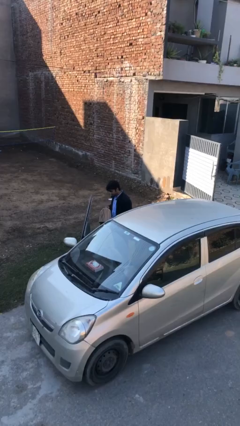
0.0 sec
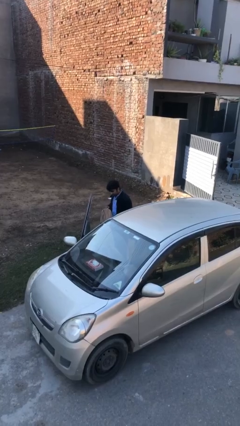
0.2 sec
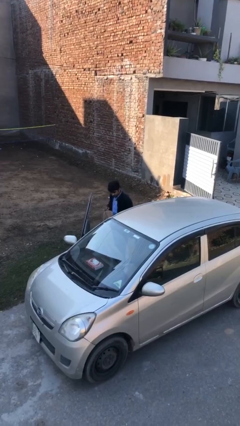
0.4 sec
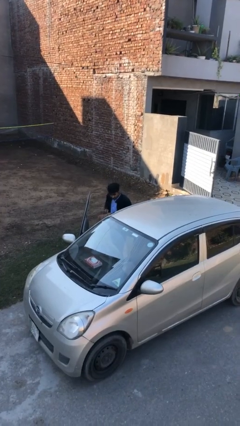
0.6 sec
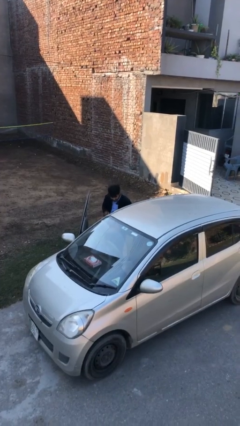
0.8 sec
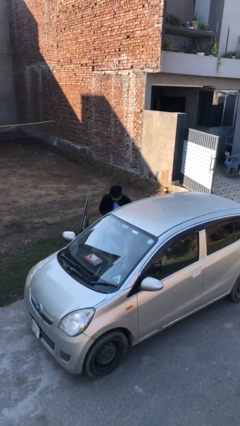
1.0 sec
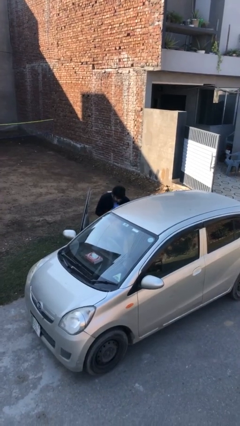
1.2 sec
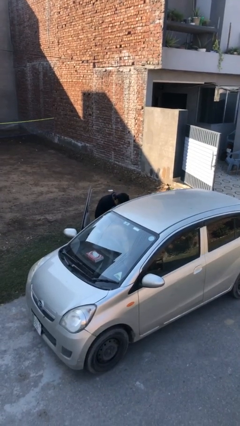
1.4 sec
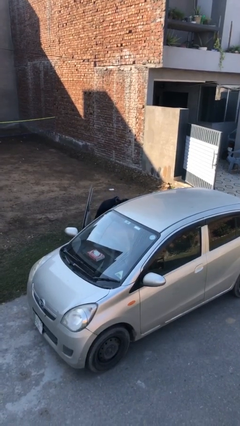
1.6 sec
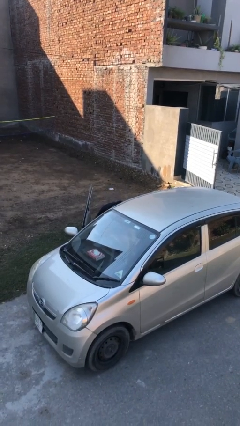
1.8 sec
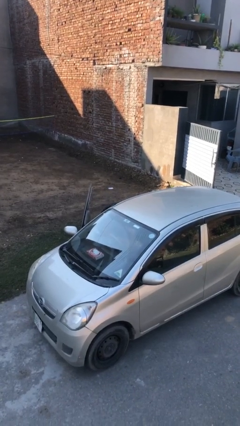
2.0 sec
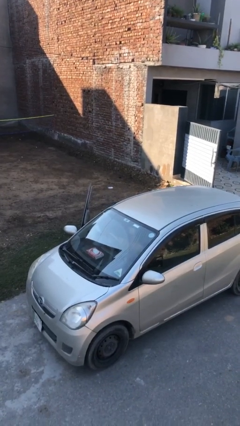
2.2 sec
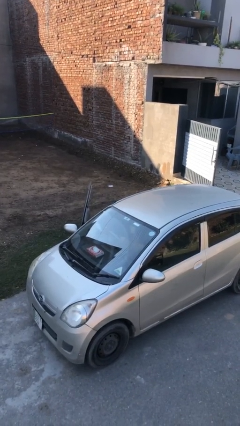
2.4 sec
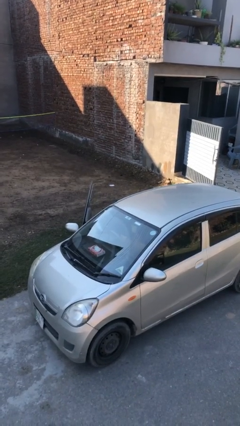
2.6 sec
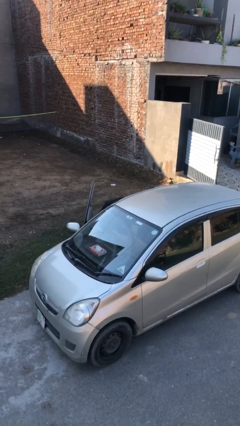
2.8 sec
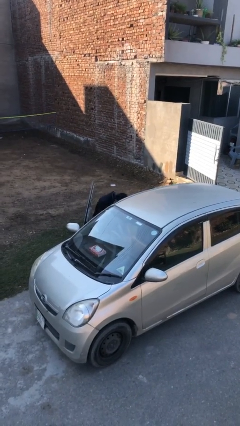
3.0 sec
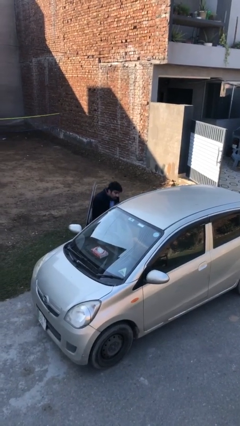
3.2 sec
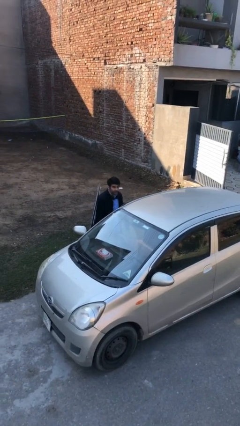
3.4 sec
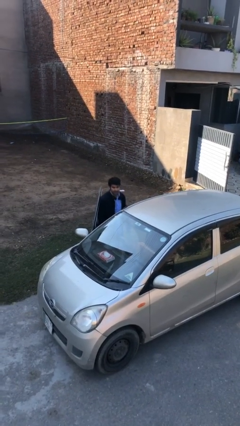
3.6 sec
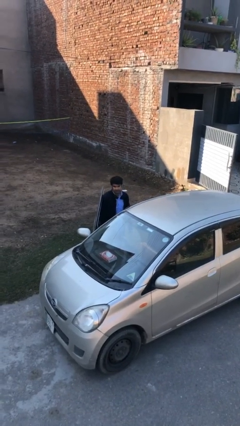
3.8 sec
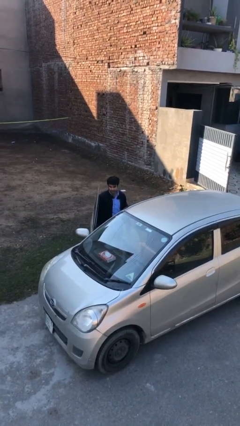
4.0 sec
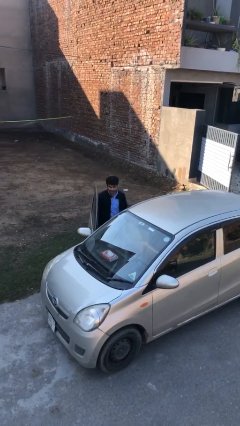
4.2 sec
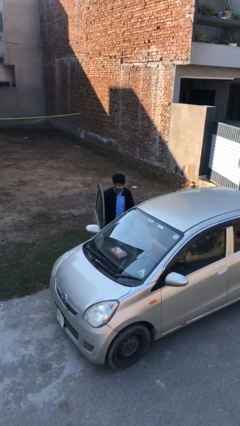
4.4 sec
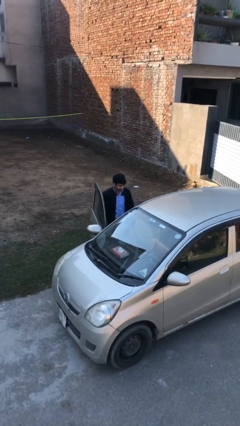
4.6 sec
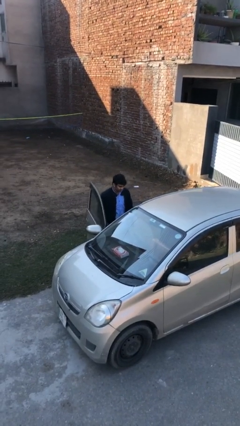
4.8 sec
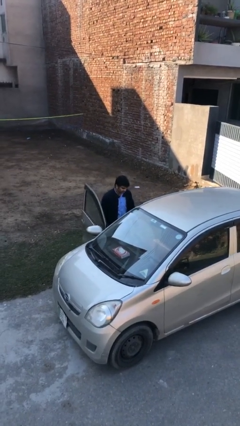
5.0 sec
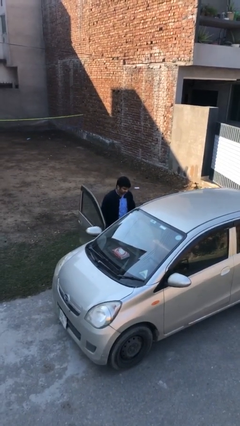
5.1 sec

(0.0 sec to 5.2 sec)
person loads car

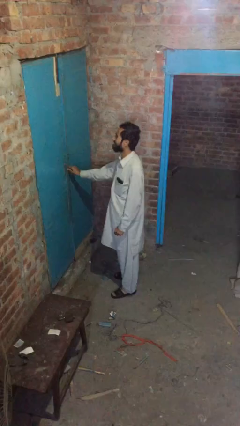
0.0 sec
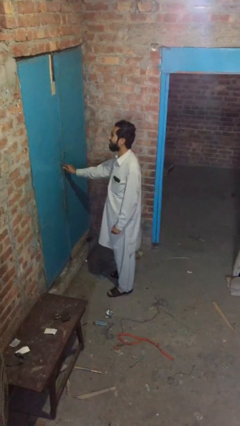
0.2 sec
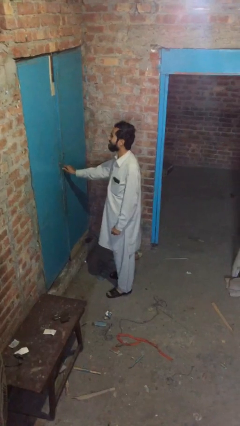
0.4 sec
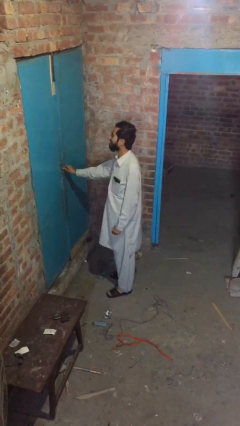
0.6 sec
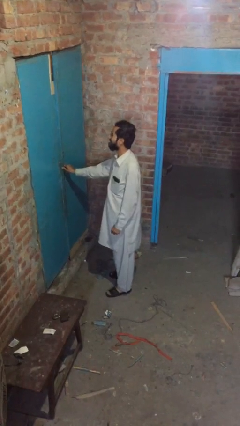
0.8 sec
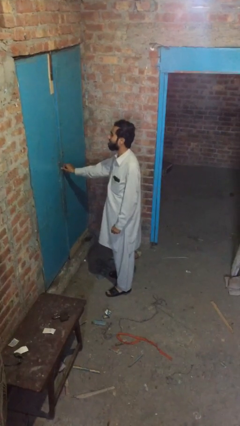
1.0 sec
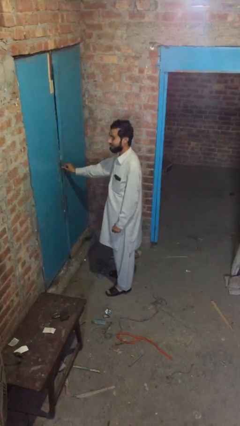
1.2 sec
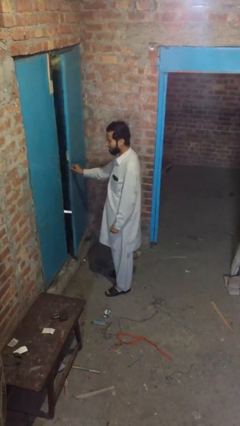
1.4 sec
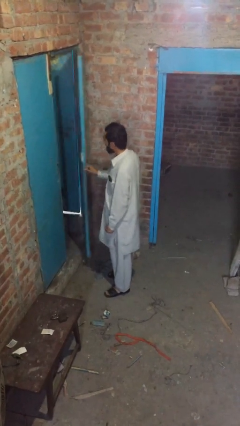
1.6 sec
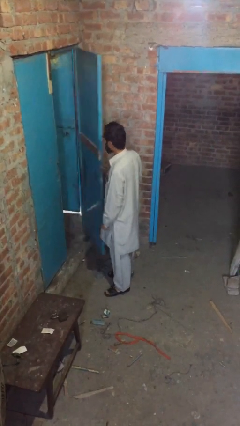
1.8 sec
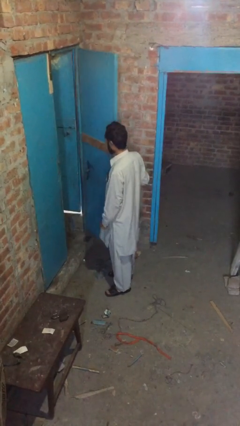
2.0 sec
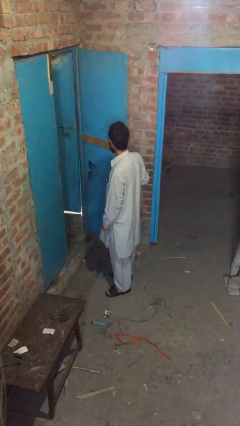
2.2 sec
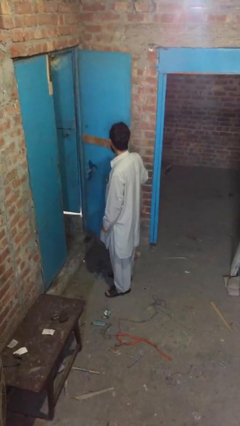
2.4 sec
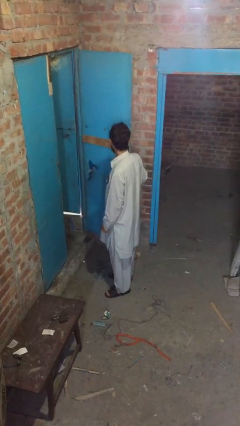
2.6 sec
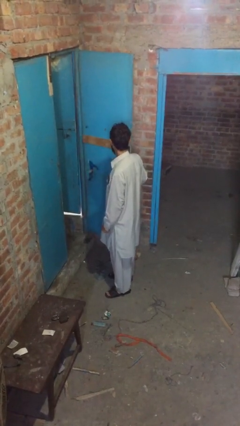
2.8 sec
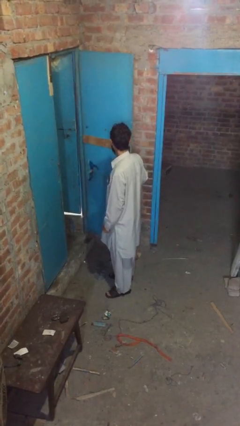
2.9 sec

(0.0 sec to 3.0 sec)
person opens facility door

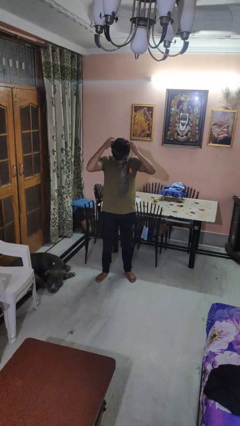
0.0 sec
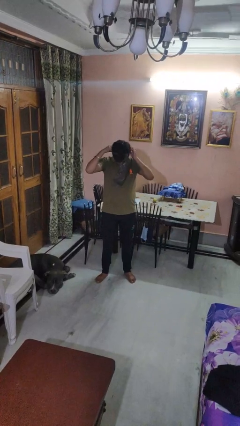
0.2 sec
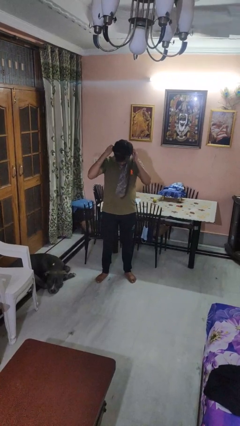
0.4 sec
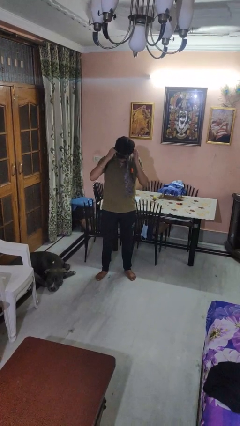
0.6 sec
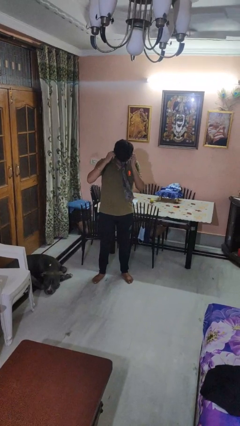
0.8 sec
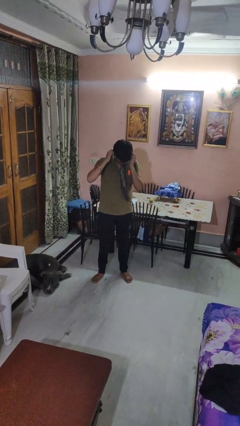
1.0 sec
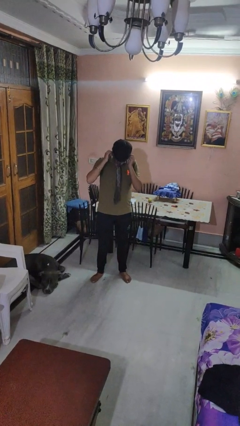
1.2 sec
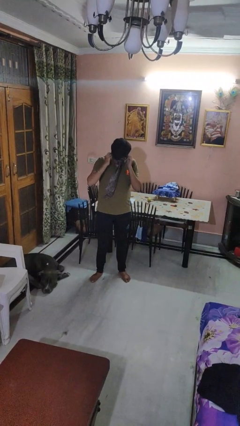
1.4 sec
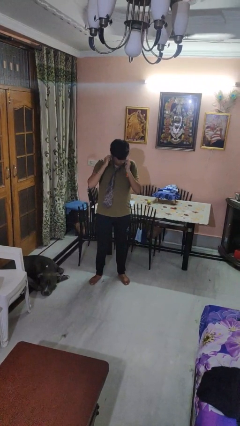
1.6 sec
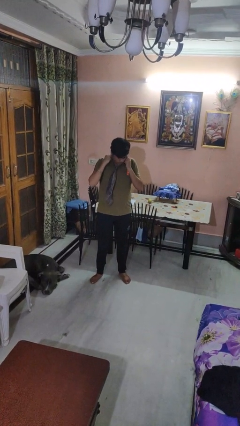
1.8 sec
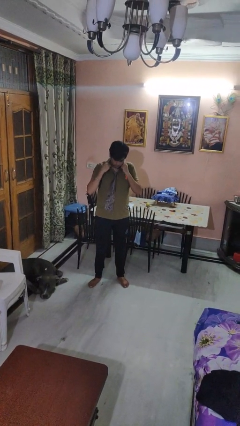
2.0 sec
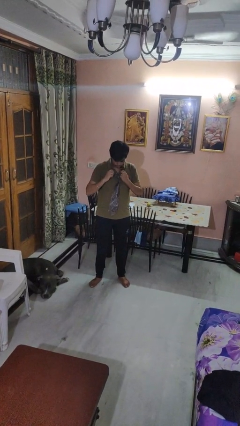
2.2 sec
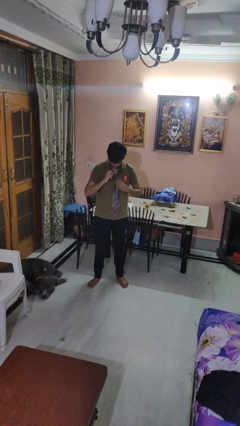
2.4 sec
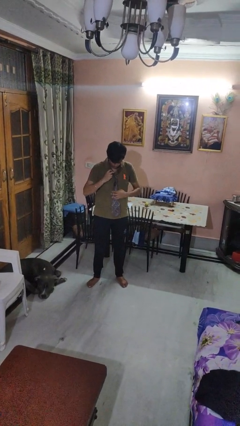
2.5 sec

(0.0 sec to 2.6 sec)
person puts on necktie

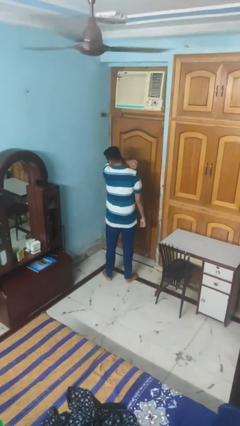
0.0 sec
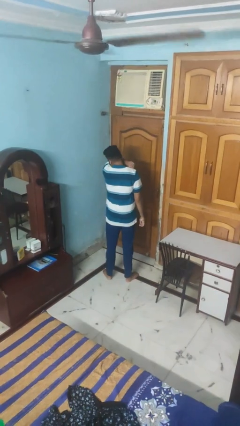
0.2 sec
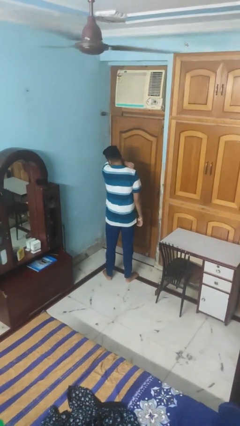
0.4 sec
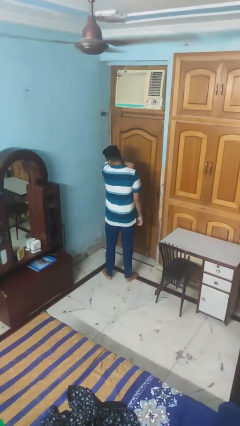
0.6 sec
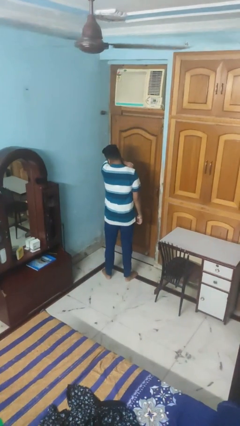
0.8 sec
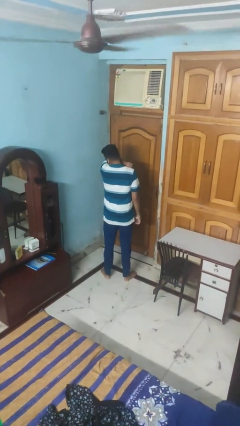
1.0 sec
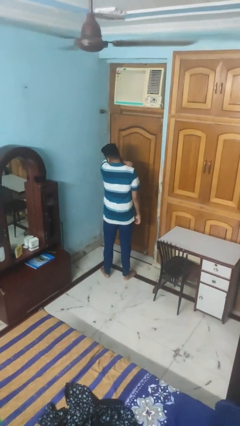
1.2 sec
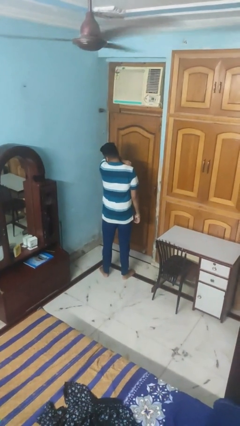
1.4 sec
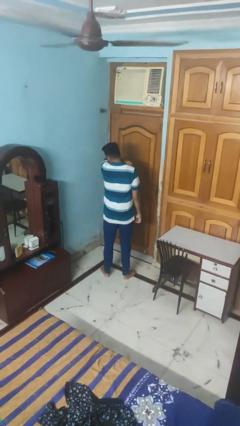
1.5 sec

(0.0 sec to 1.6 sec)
person sneezes into arm

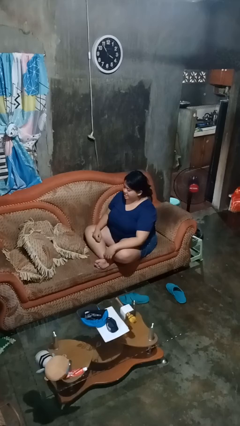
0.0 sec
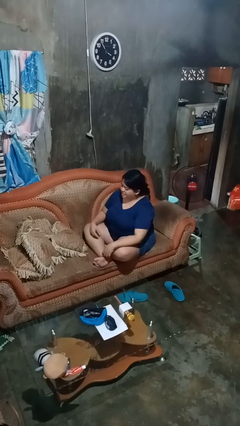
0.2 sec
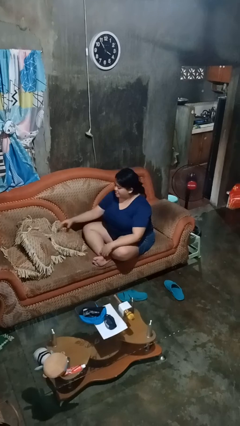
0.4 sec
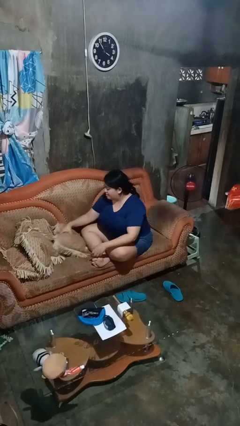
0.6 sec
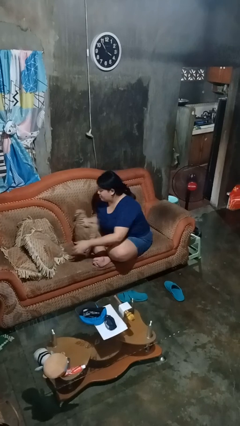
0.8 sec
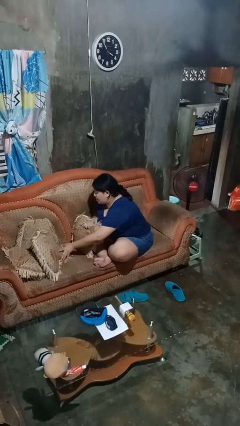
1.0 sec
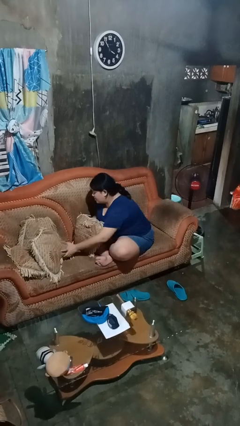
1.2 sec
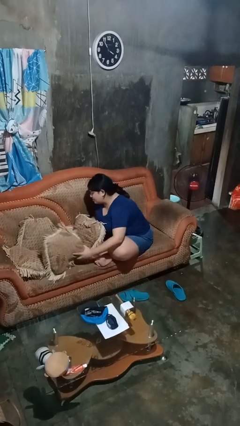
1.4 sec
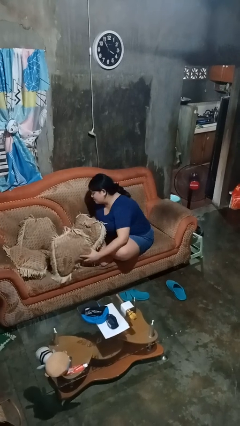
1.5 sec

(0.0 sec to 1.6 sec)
person searches in couch

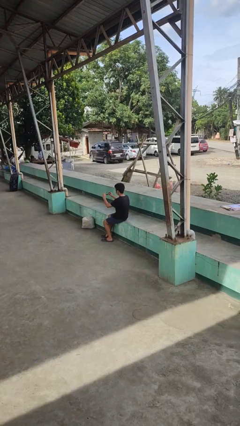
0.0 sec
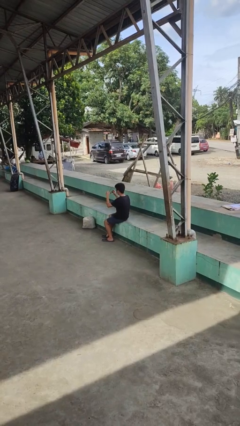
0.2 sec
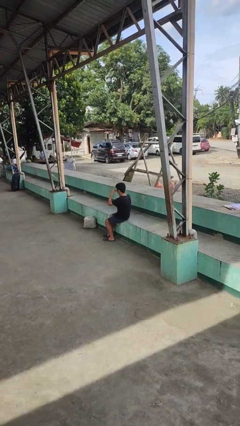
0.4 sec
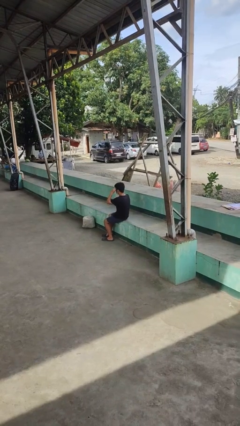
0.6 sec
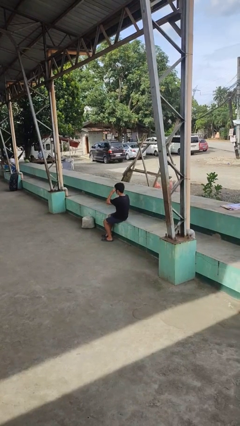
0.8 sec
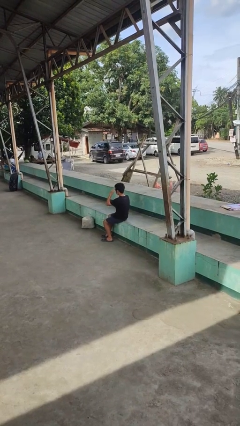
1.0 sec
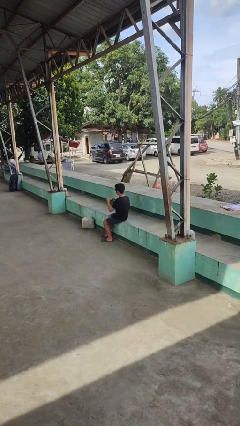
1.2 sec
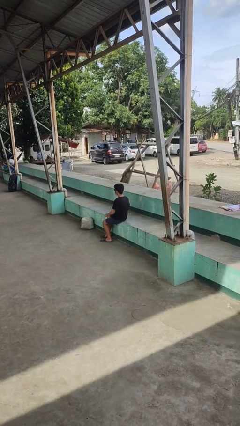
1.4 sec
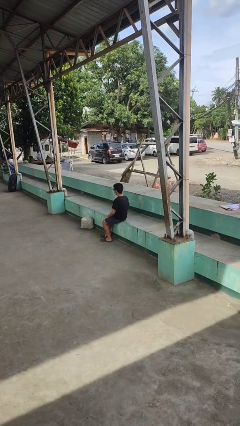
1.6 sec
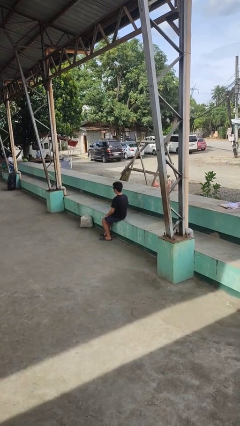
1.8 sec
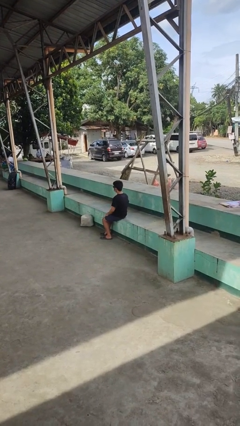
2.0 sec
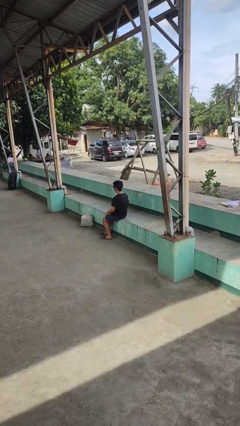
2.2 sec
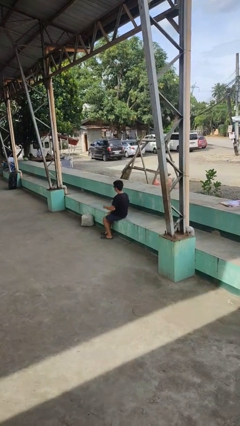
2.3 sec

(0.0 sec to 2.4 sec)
person puts on sunglasses

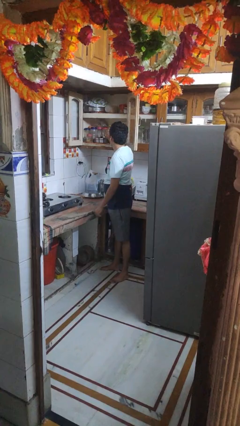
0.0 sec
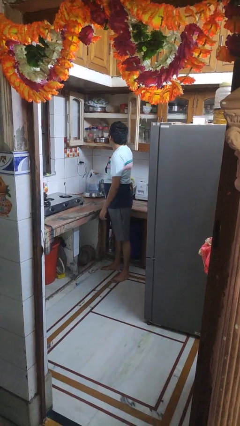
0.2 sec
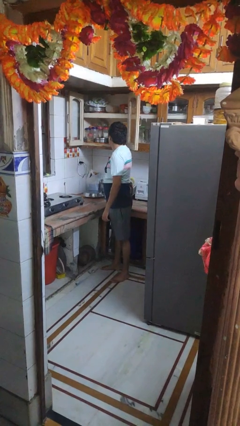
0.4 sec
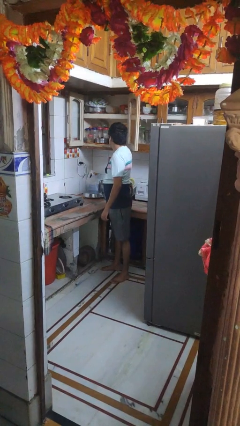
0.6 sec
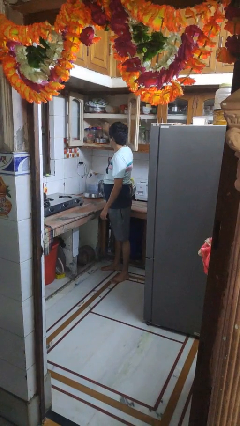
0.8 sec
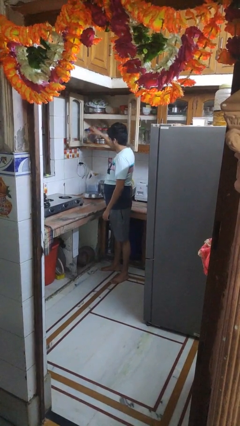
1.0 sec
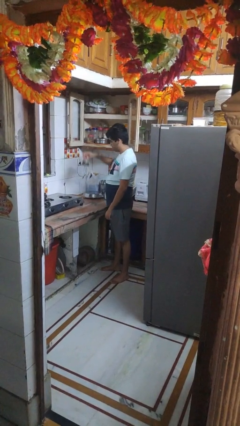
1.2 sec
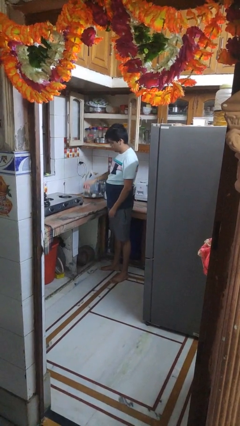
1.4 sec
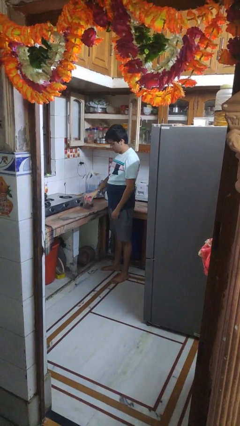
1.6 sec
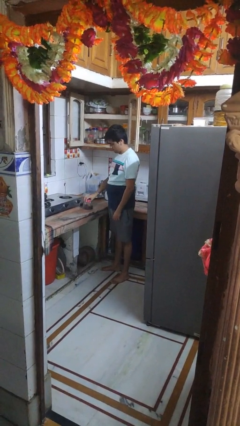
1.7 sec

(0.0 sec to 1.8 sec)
person takes object from cabinet
